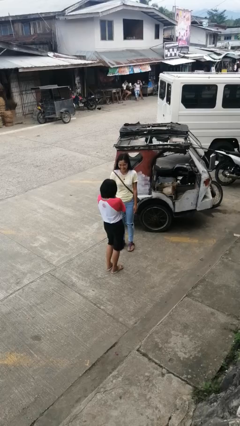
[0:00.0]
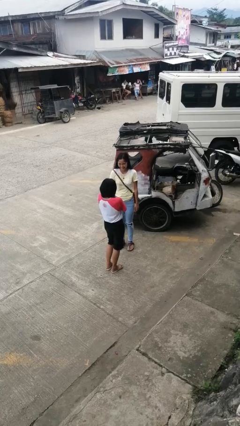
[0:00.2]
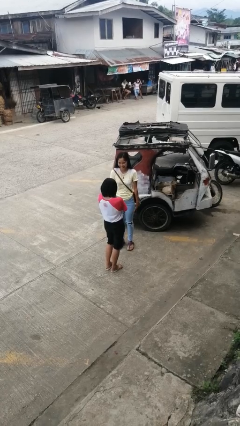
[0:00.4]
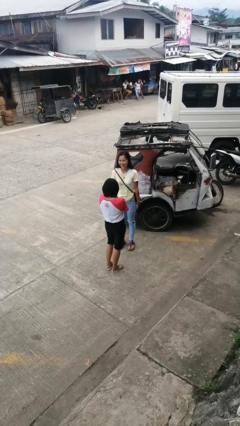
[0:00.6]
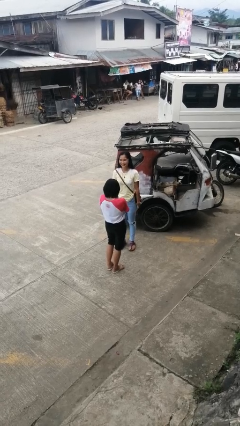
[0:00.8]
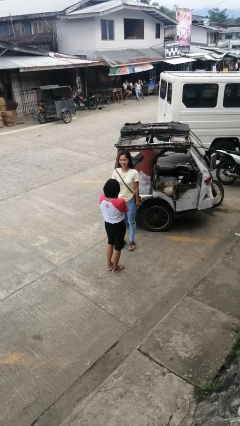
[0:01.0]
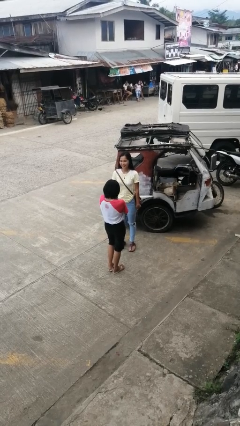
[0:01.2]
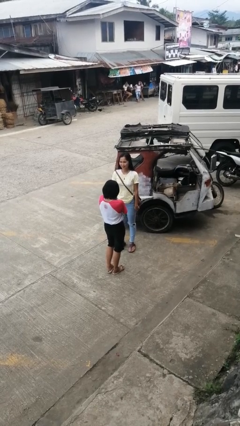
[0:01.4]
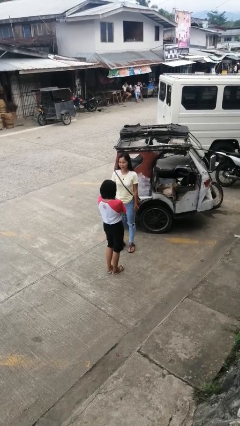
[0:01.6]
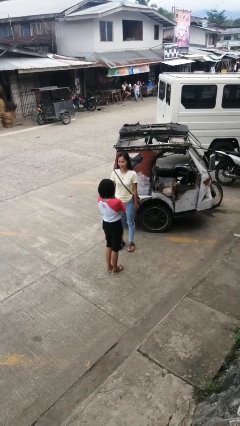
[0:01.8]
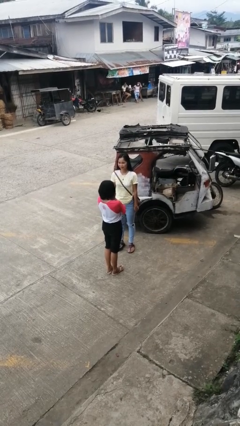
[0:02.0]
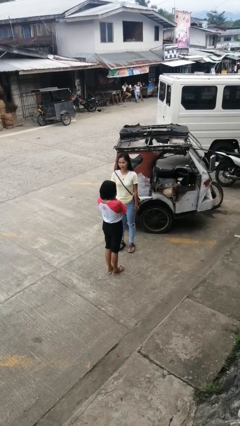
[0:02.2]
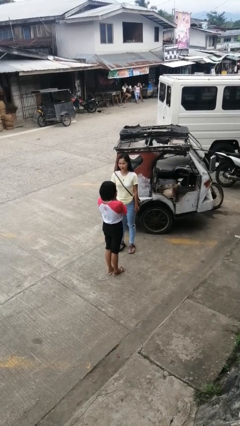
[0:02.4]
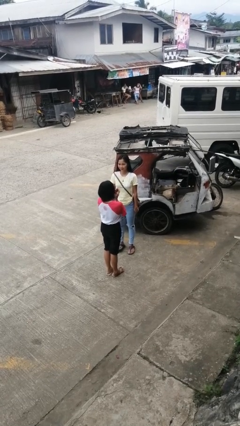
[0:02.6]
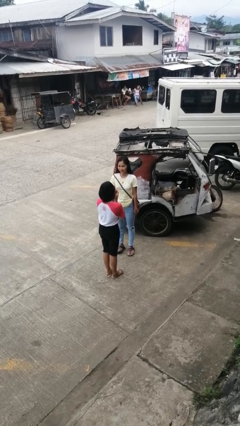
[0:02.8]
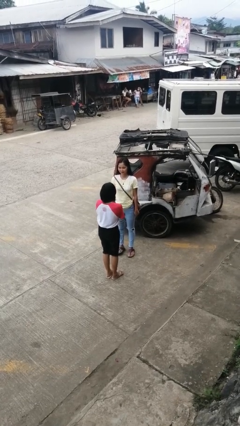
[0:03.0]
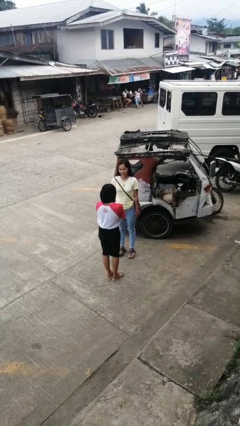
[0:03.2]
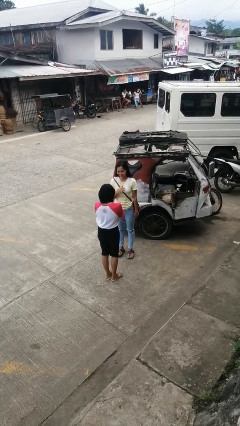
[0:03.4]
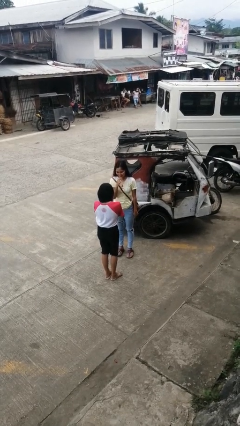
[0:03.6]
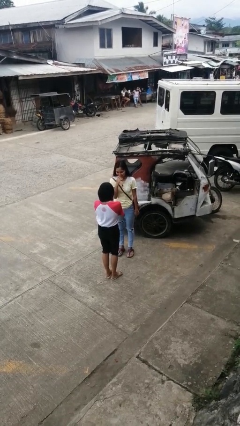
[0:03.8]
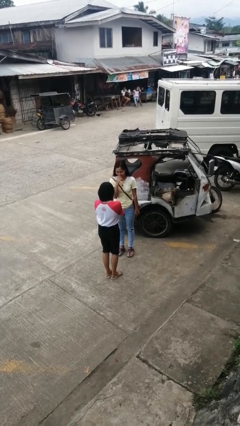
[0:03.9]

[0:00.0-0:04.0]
person laughs with person

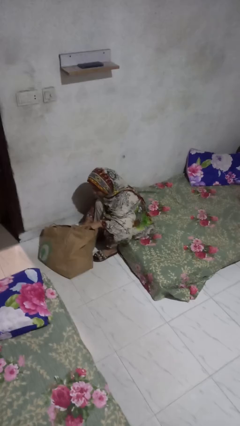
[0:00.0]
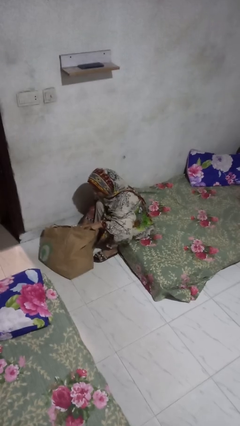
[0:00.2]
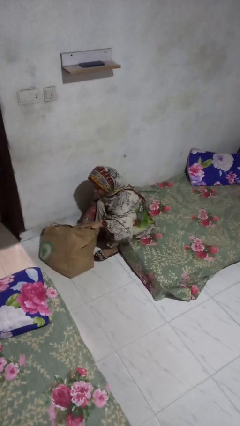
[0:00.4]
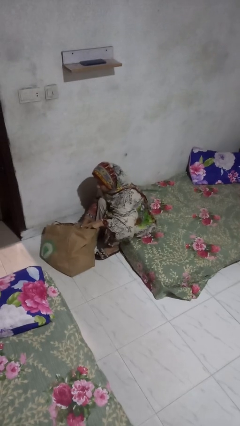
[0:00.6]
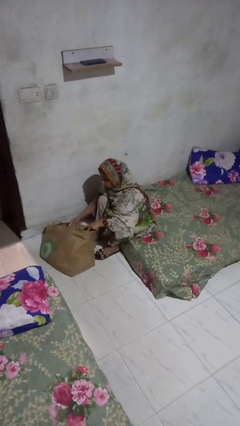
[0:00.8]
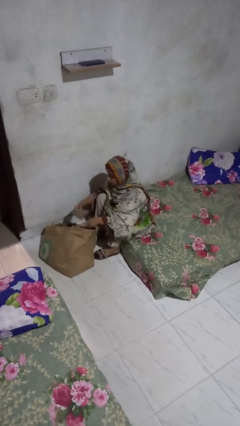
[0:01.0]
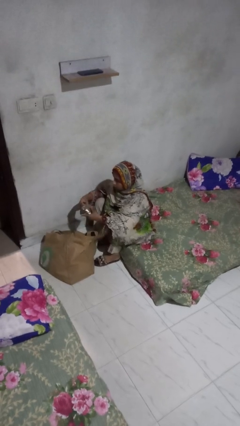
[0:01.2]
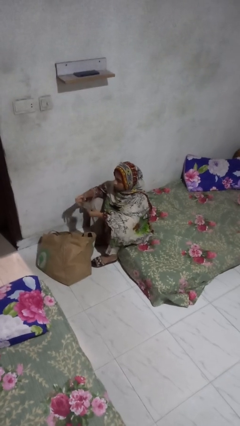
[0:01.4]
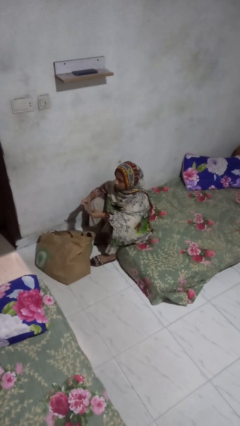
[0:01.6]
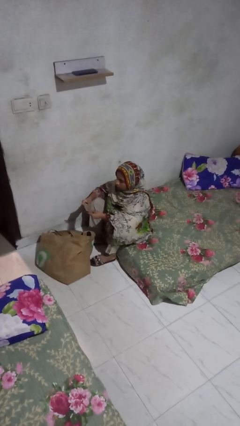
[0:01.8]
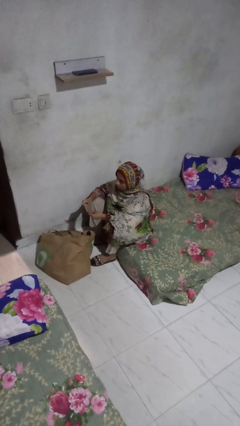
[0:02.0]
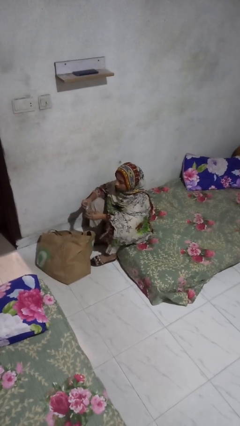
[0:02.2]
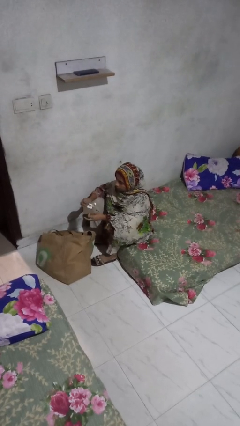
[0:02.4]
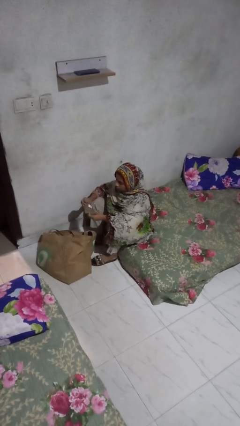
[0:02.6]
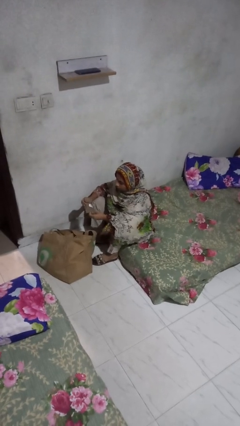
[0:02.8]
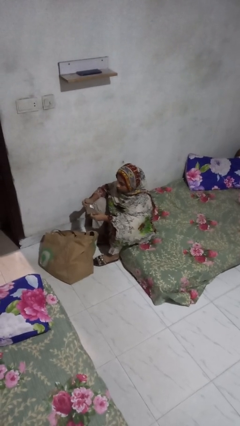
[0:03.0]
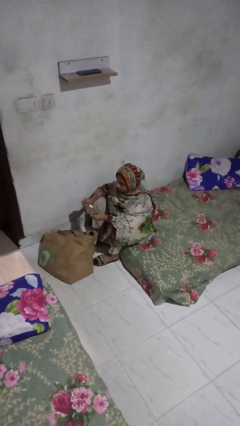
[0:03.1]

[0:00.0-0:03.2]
person takes object from bag

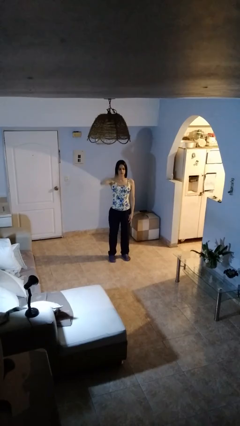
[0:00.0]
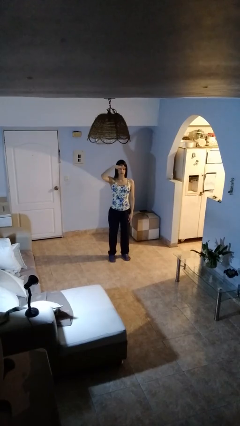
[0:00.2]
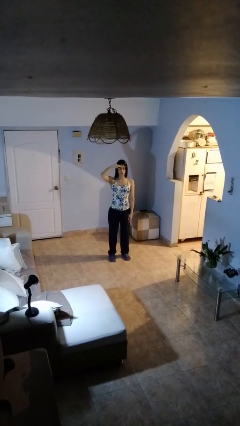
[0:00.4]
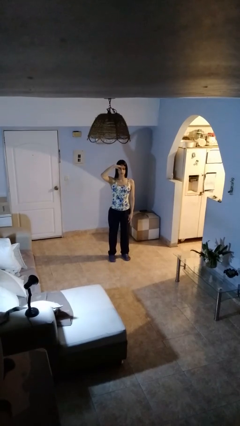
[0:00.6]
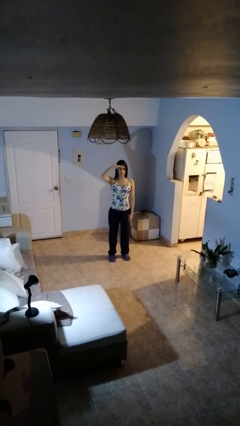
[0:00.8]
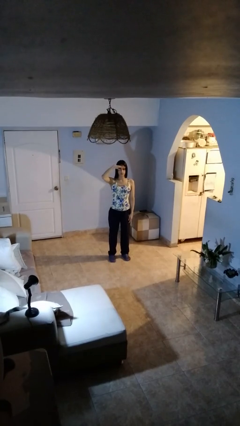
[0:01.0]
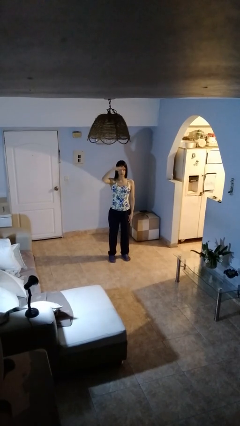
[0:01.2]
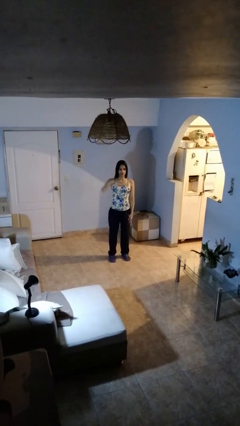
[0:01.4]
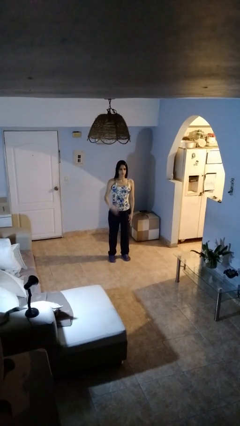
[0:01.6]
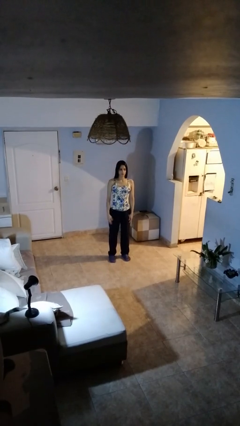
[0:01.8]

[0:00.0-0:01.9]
person salutes

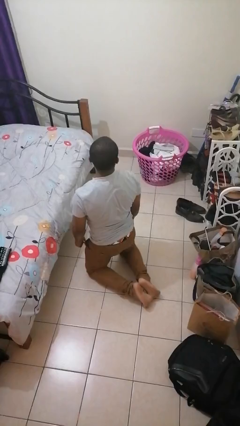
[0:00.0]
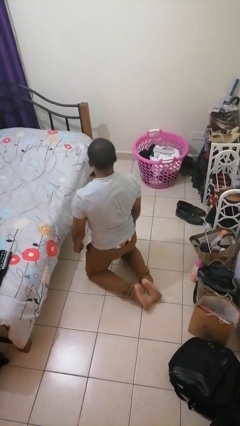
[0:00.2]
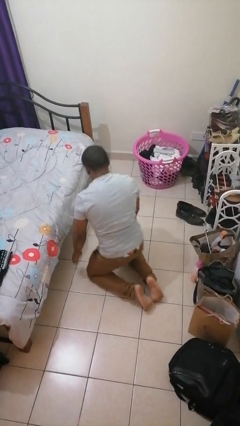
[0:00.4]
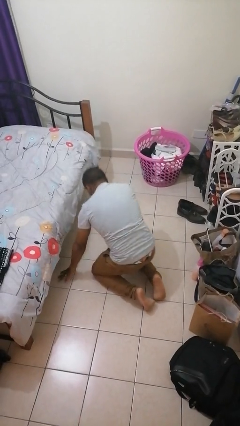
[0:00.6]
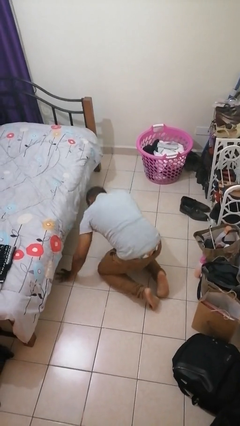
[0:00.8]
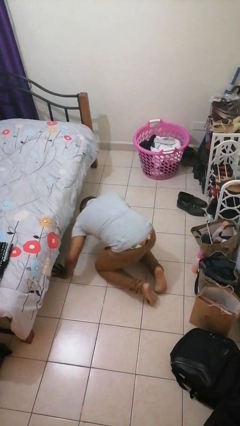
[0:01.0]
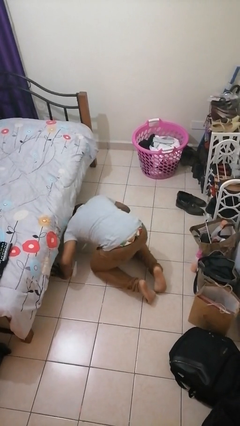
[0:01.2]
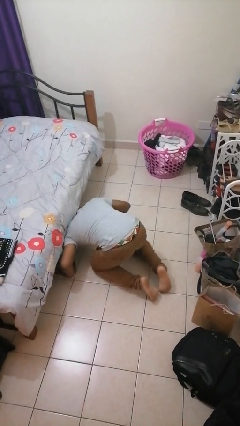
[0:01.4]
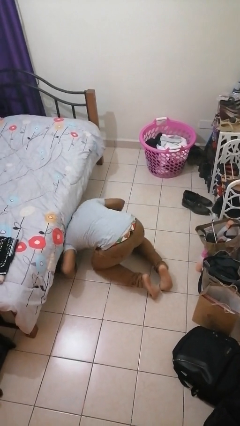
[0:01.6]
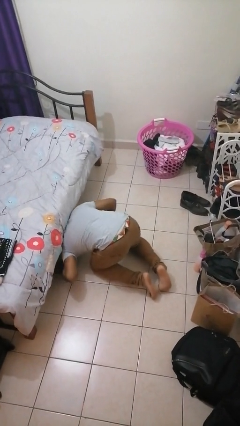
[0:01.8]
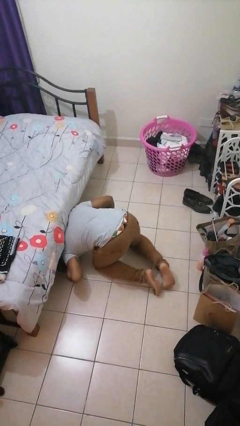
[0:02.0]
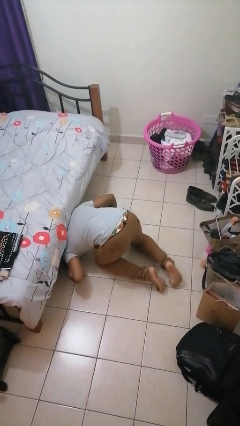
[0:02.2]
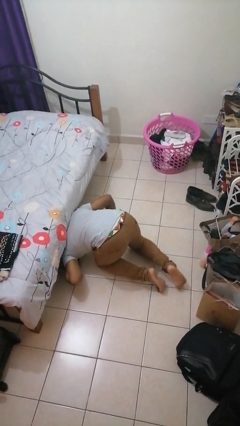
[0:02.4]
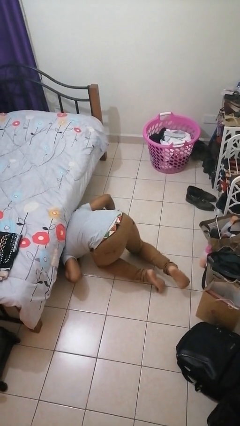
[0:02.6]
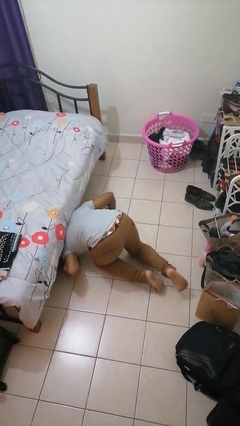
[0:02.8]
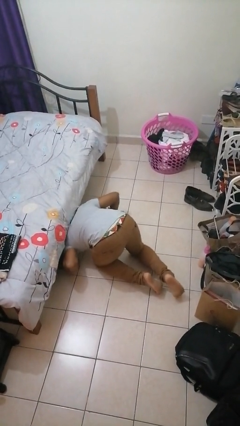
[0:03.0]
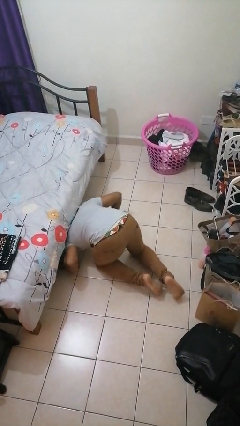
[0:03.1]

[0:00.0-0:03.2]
person searches under bed

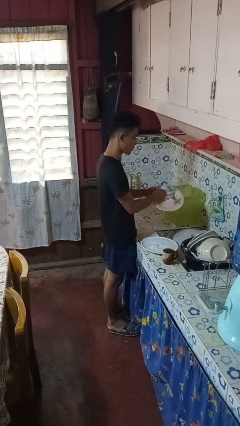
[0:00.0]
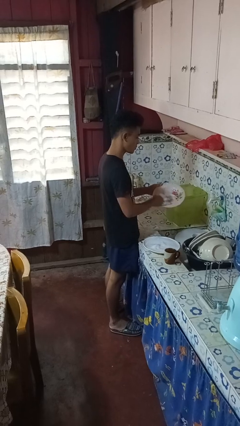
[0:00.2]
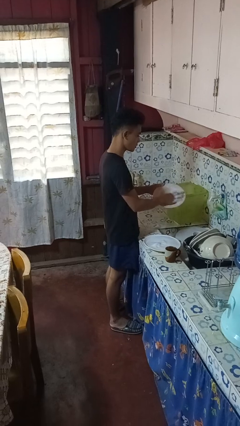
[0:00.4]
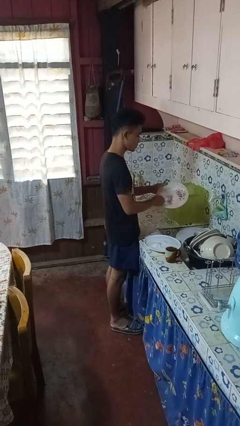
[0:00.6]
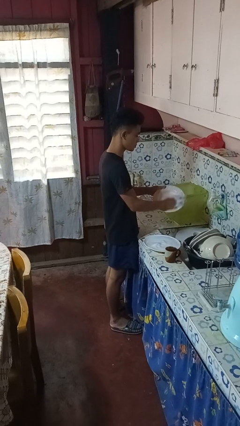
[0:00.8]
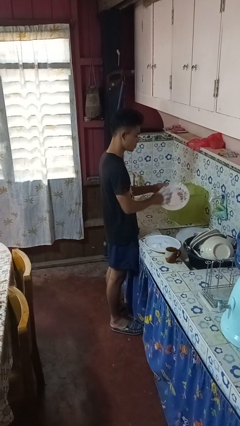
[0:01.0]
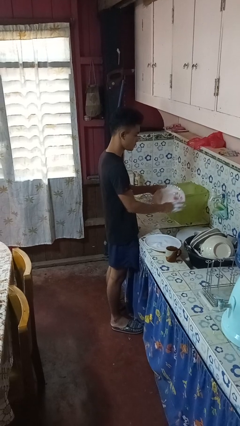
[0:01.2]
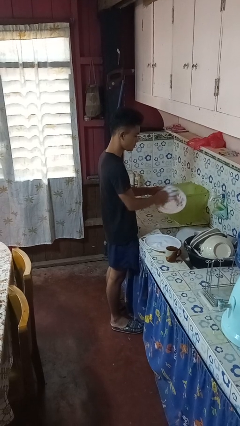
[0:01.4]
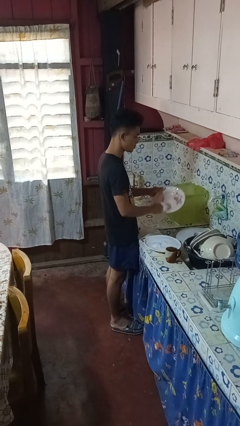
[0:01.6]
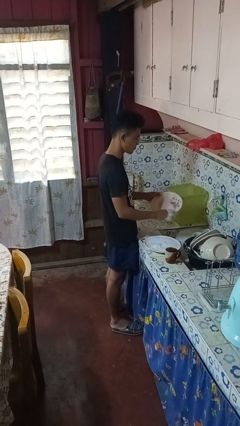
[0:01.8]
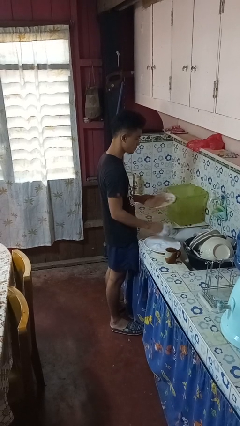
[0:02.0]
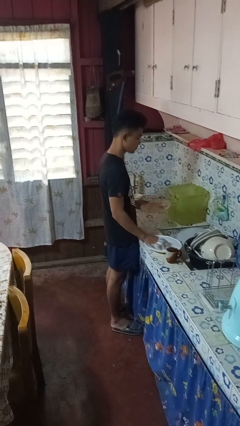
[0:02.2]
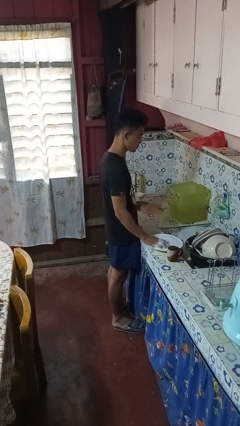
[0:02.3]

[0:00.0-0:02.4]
person washes dish

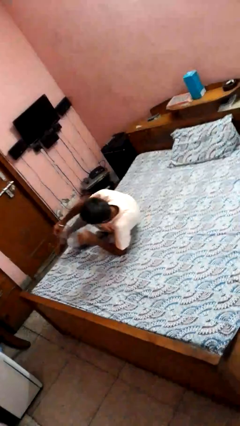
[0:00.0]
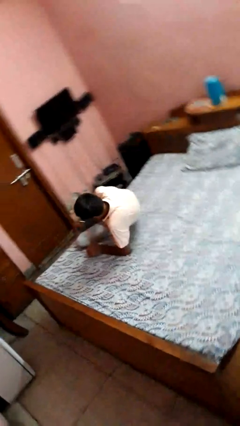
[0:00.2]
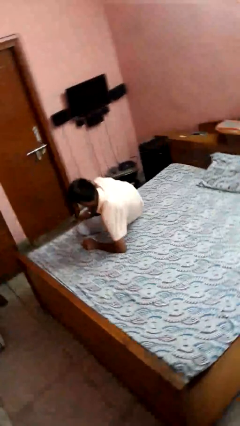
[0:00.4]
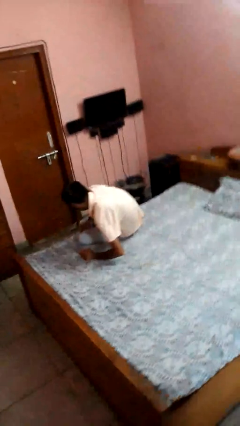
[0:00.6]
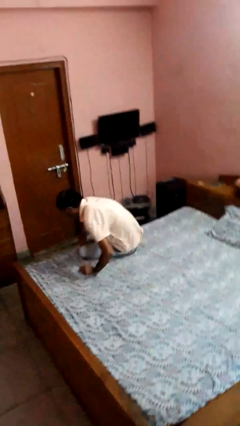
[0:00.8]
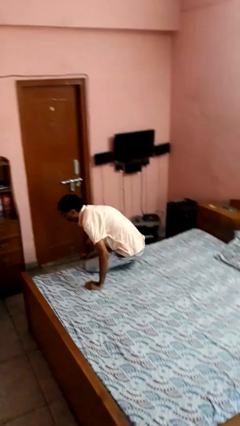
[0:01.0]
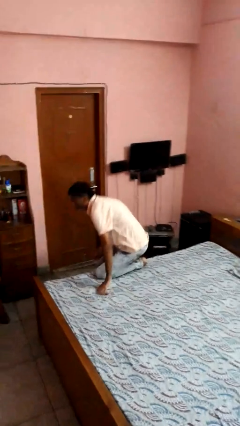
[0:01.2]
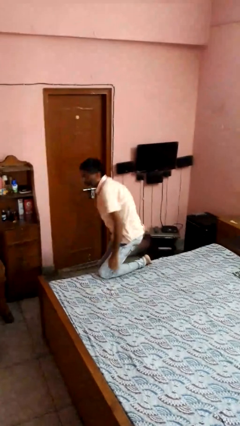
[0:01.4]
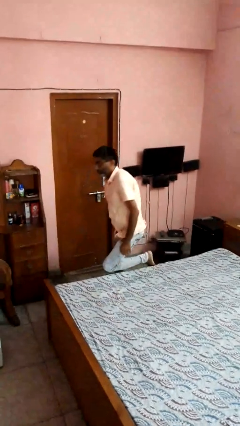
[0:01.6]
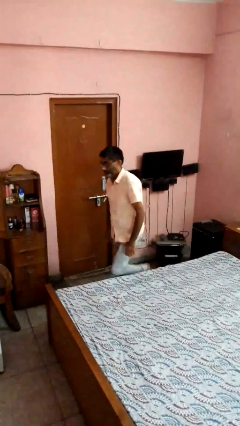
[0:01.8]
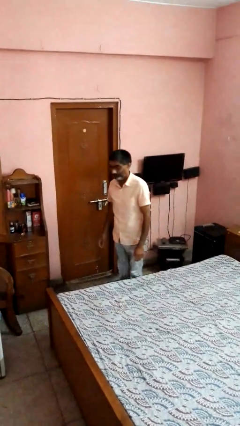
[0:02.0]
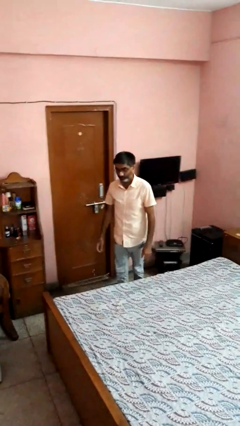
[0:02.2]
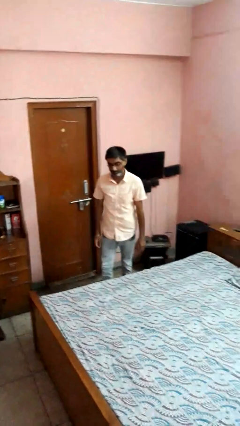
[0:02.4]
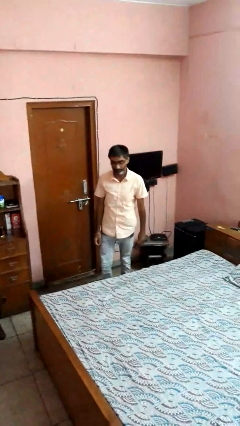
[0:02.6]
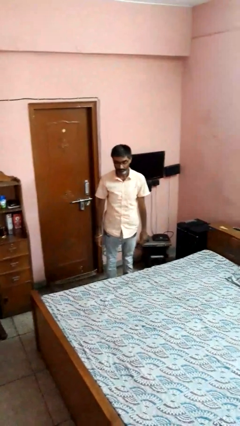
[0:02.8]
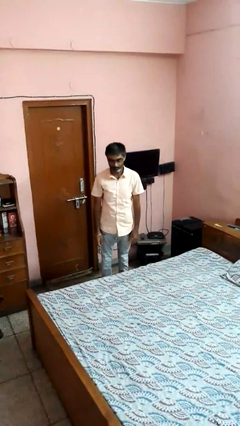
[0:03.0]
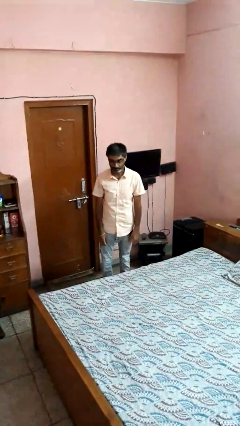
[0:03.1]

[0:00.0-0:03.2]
person stands up
